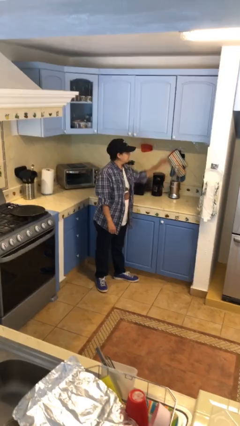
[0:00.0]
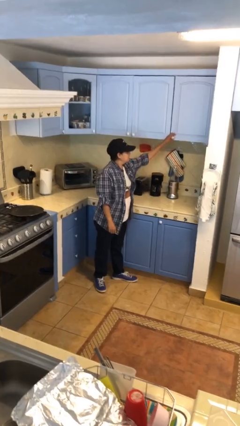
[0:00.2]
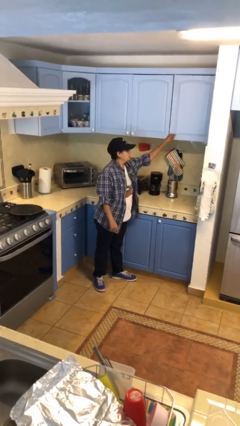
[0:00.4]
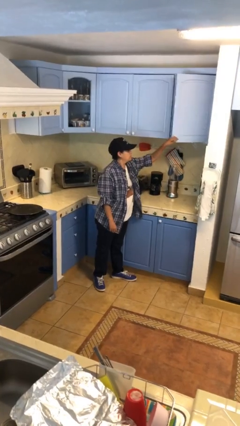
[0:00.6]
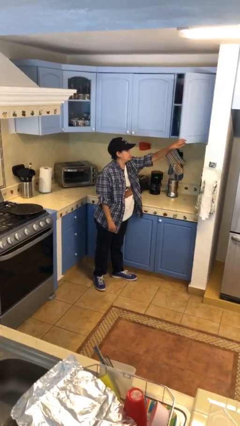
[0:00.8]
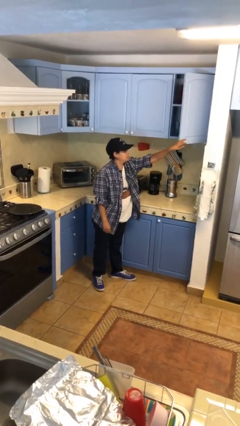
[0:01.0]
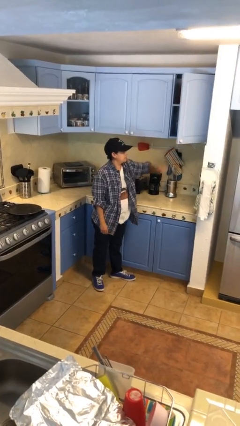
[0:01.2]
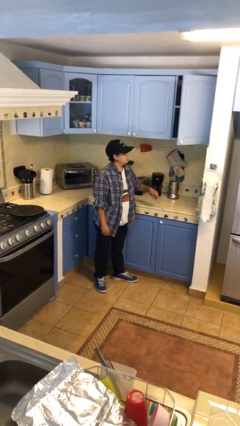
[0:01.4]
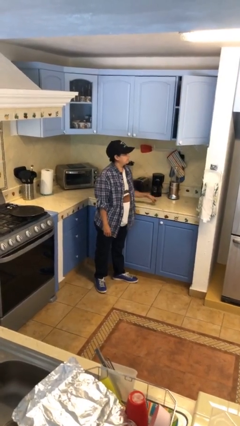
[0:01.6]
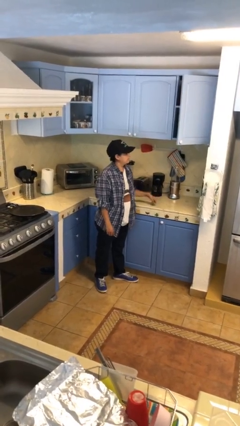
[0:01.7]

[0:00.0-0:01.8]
person opens cabinet

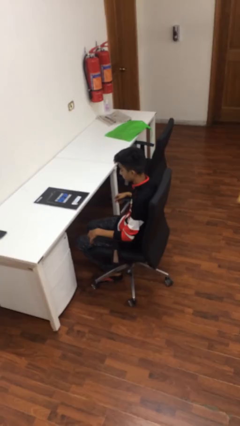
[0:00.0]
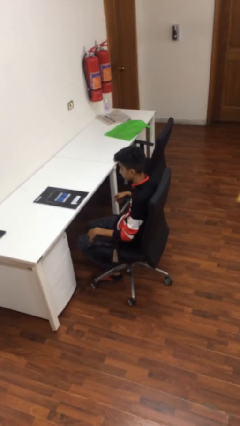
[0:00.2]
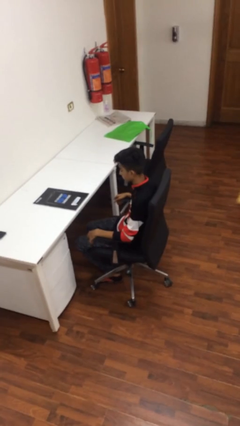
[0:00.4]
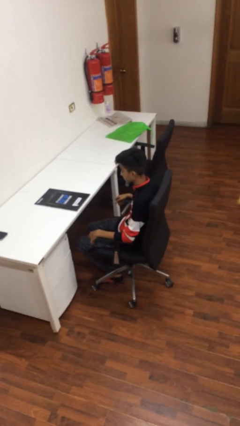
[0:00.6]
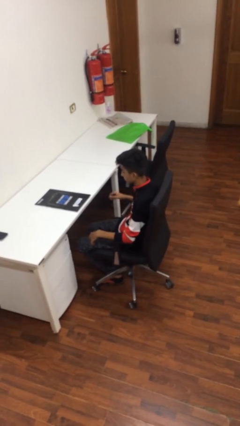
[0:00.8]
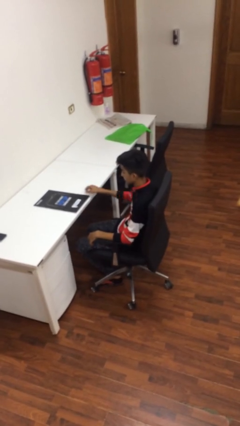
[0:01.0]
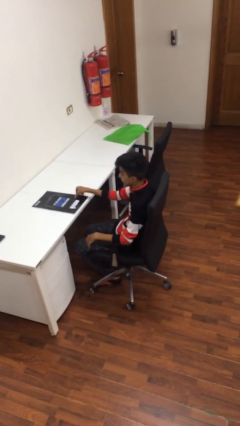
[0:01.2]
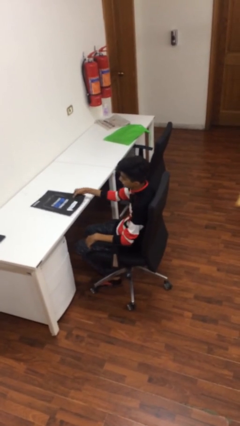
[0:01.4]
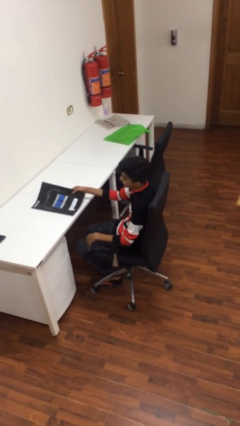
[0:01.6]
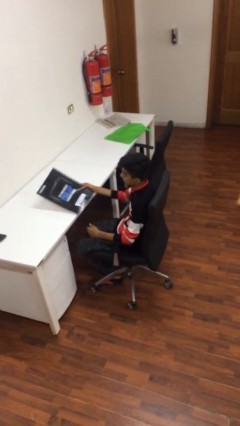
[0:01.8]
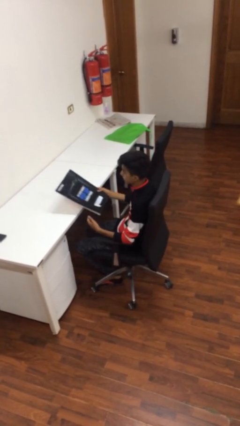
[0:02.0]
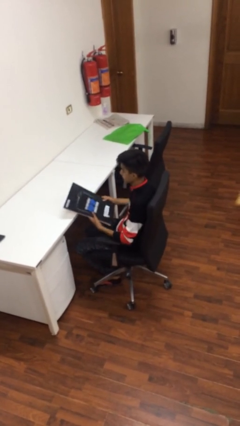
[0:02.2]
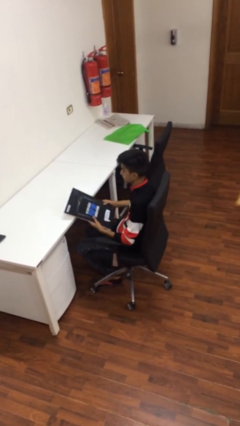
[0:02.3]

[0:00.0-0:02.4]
person picks up object from table

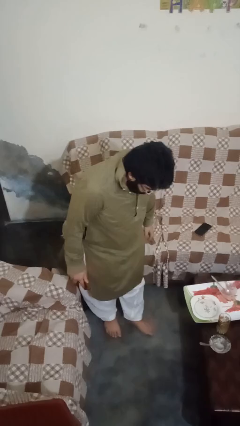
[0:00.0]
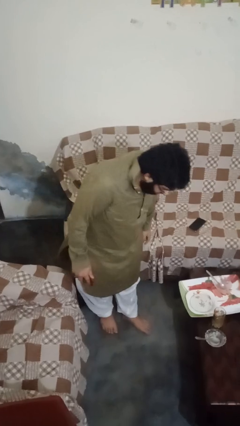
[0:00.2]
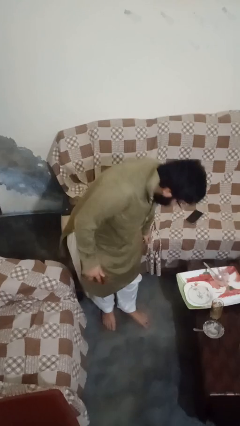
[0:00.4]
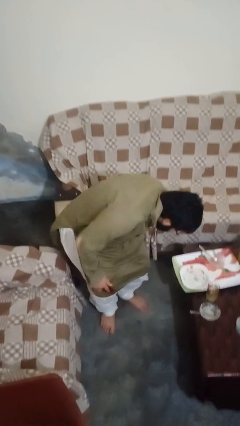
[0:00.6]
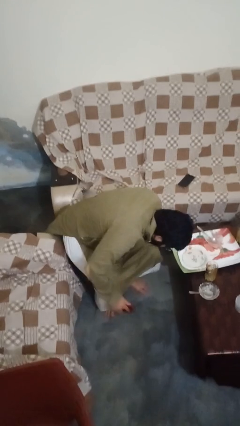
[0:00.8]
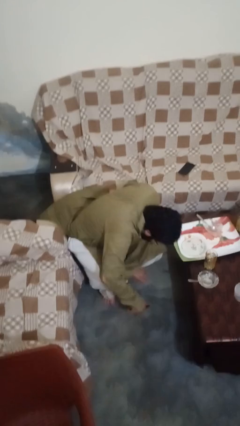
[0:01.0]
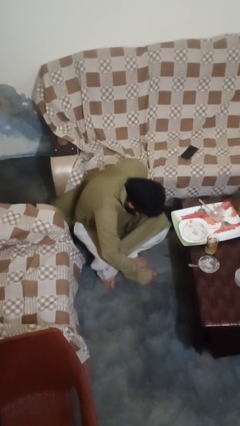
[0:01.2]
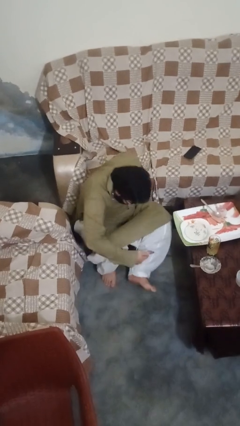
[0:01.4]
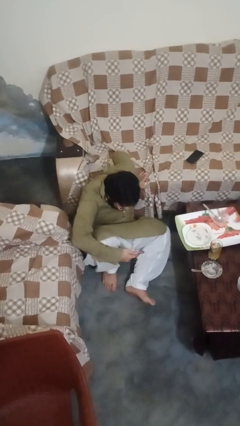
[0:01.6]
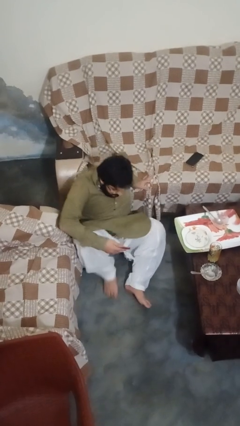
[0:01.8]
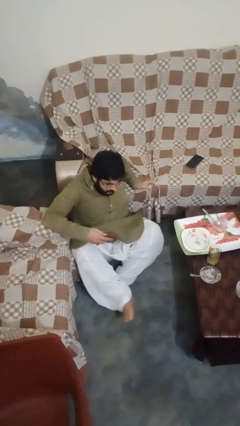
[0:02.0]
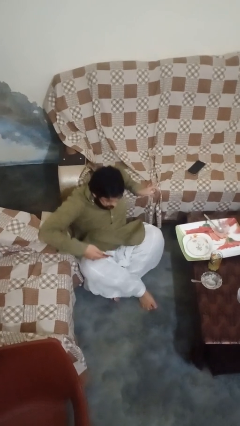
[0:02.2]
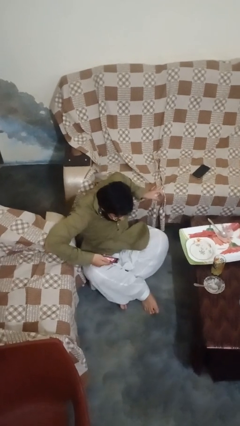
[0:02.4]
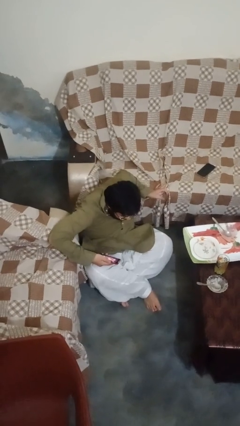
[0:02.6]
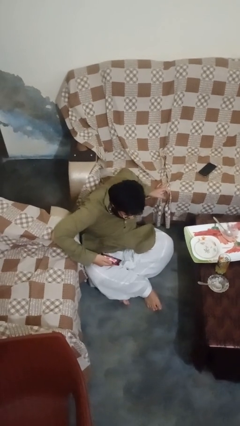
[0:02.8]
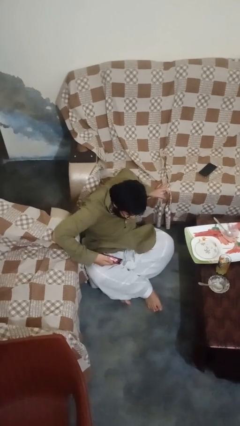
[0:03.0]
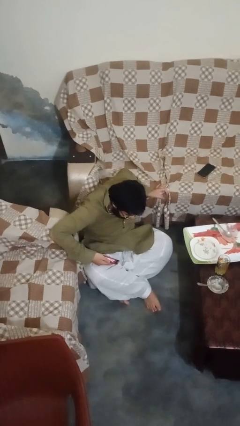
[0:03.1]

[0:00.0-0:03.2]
person sits crisscross

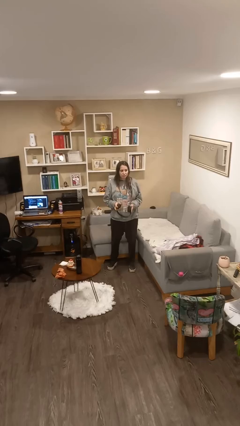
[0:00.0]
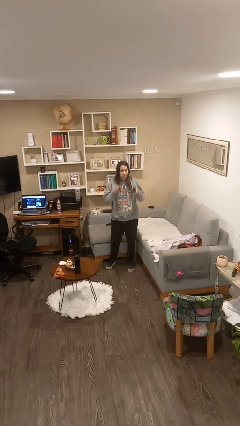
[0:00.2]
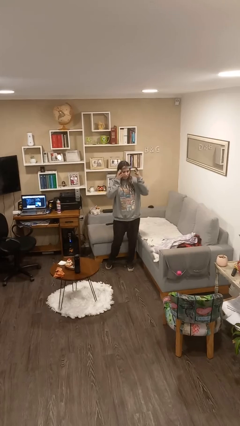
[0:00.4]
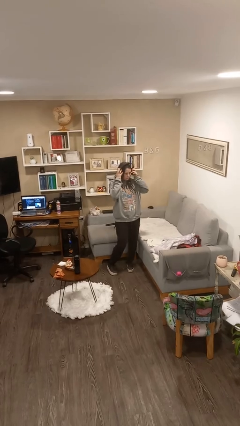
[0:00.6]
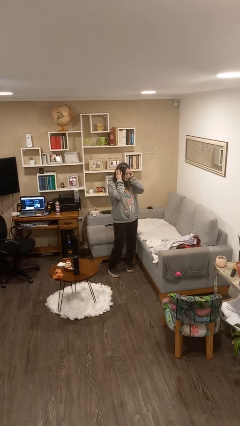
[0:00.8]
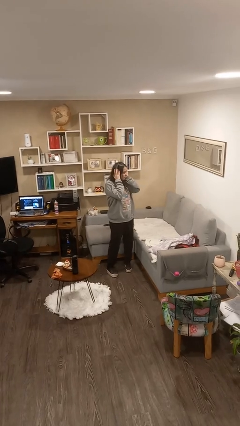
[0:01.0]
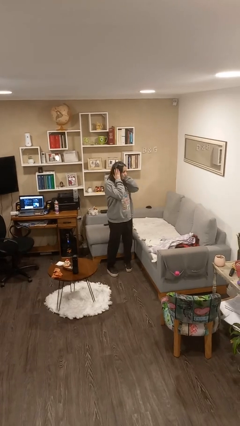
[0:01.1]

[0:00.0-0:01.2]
person puts on headphones

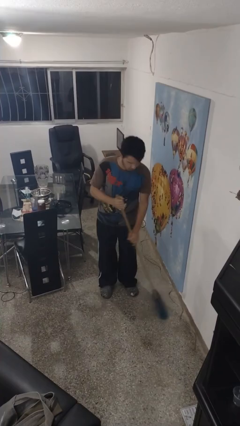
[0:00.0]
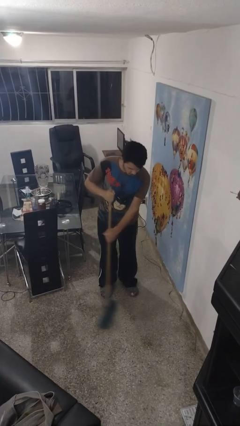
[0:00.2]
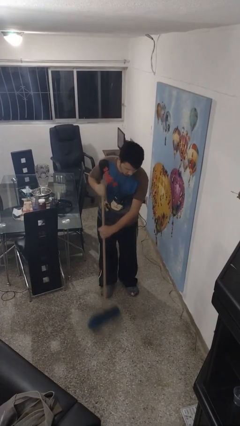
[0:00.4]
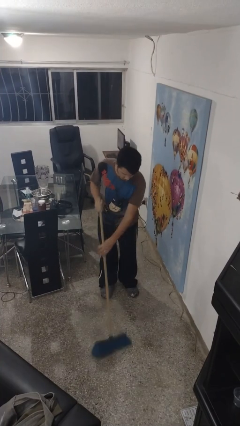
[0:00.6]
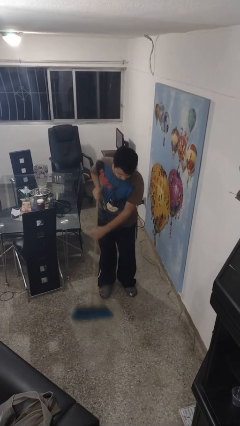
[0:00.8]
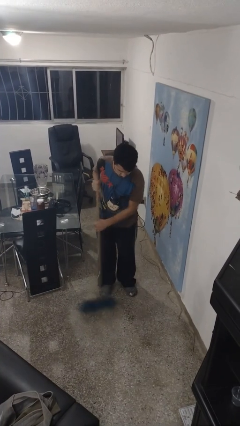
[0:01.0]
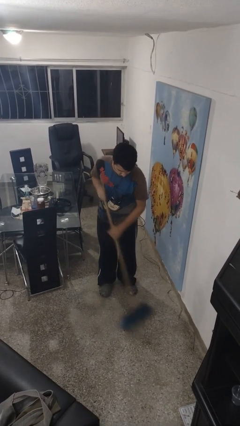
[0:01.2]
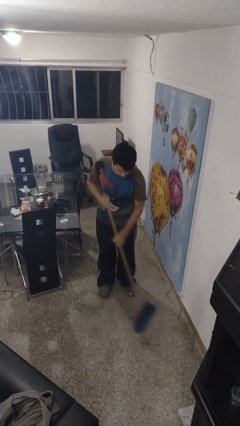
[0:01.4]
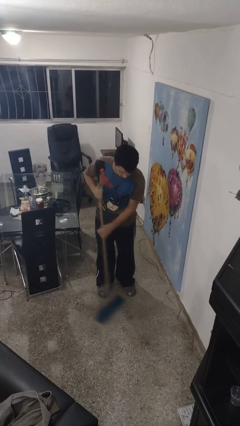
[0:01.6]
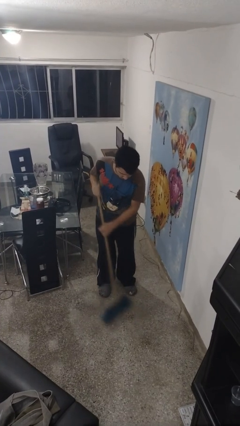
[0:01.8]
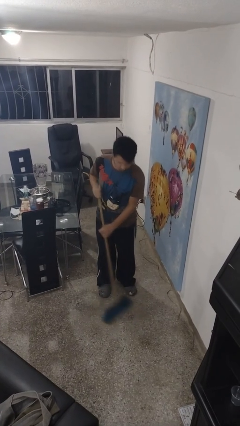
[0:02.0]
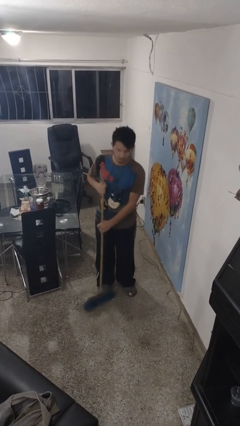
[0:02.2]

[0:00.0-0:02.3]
person sweeps floor

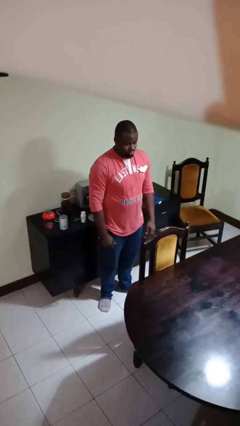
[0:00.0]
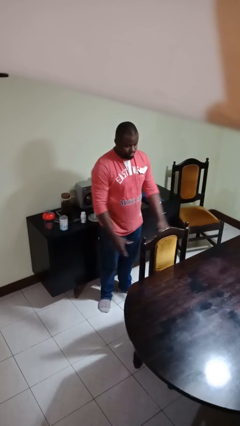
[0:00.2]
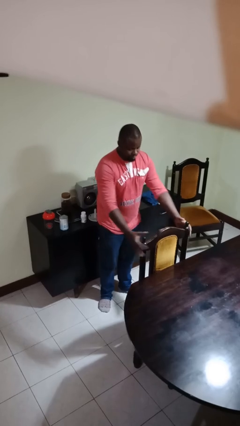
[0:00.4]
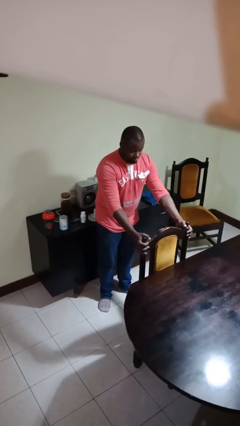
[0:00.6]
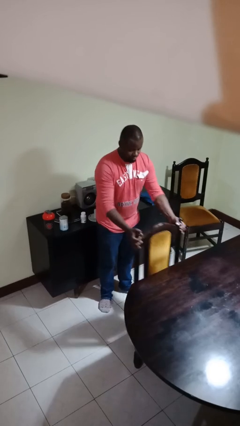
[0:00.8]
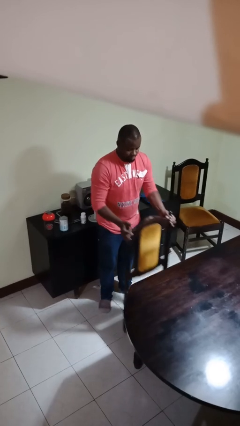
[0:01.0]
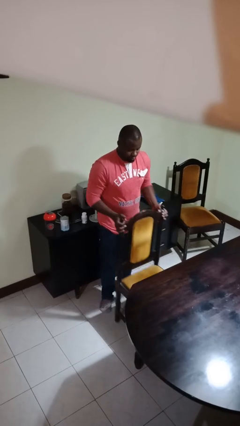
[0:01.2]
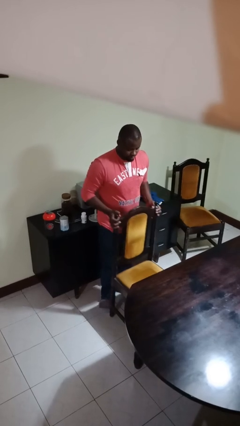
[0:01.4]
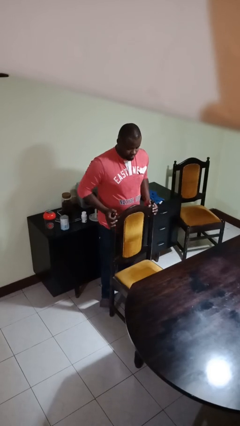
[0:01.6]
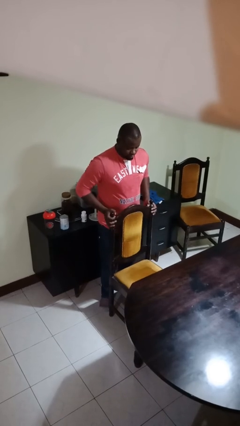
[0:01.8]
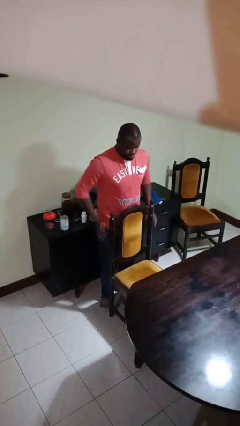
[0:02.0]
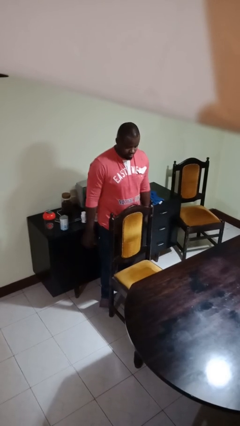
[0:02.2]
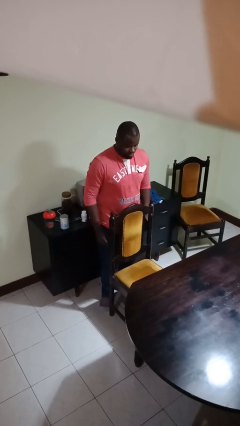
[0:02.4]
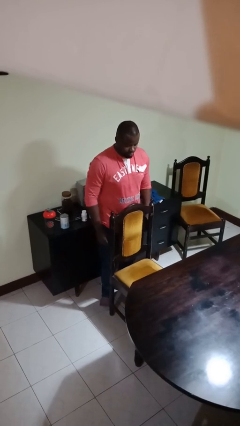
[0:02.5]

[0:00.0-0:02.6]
person pulls out chair

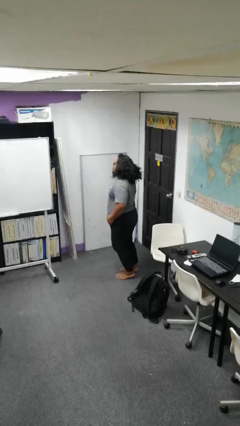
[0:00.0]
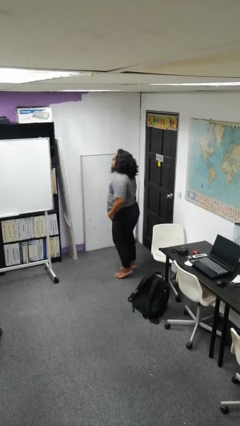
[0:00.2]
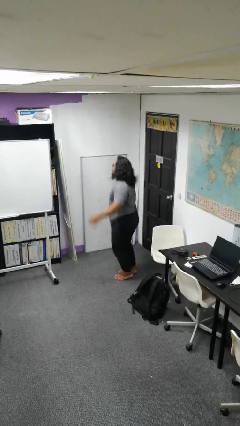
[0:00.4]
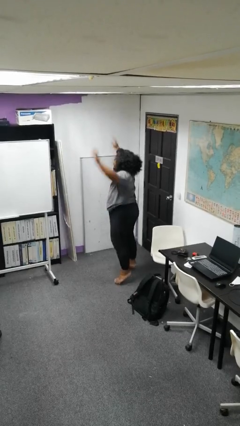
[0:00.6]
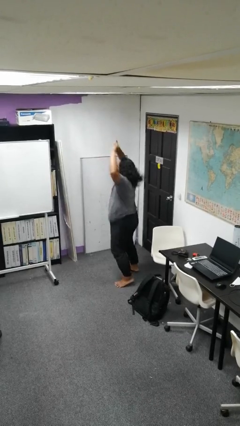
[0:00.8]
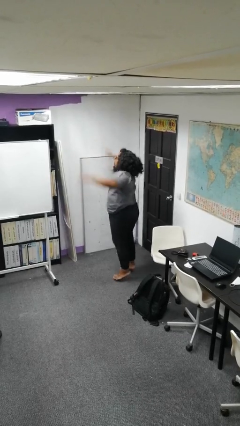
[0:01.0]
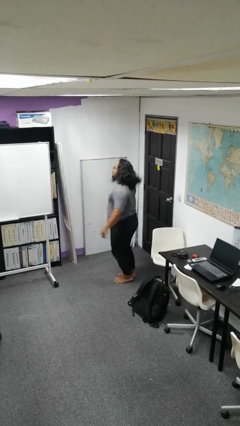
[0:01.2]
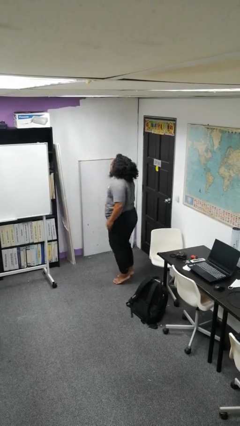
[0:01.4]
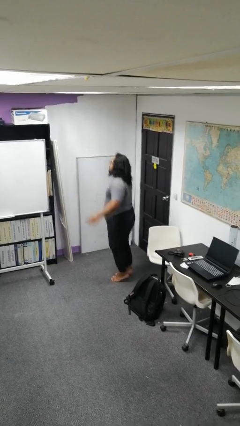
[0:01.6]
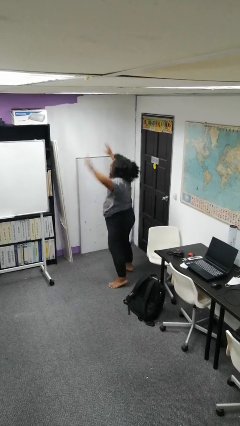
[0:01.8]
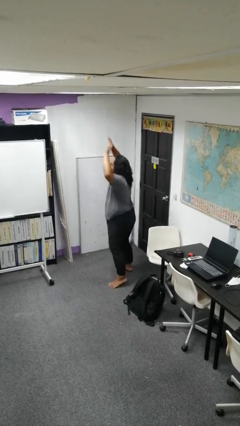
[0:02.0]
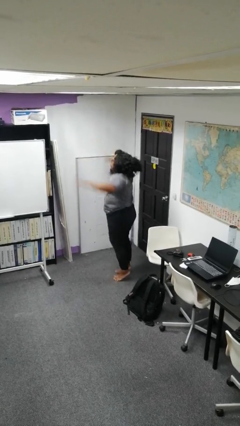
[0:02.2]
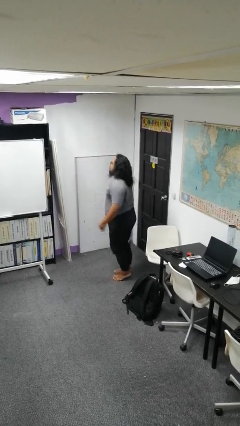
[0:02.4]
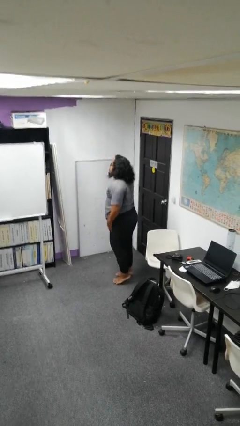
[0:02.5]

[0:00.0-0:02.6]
person exercises with jumping jacks

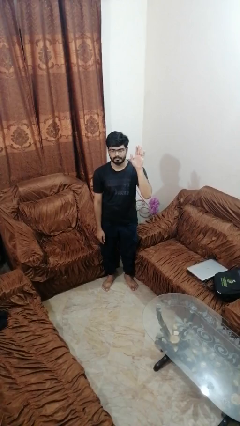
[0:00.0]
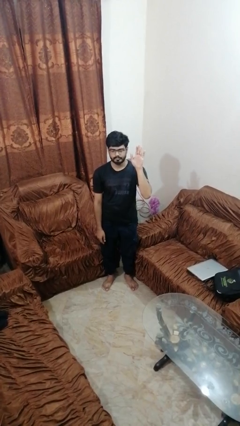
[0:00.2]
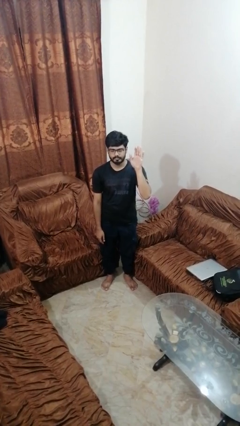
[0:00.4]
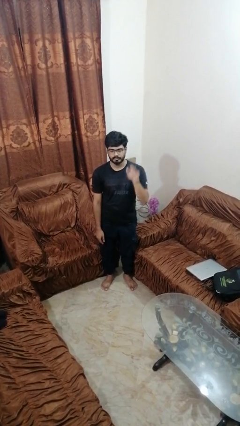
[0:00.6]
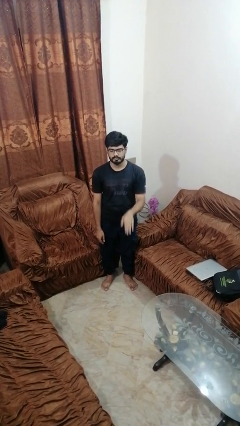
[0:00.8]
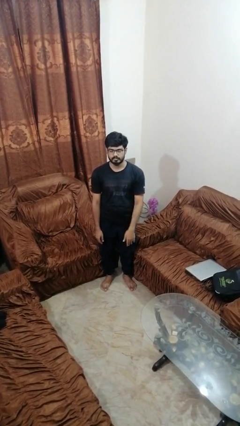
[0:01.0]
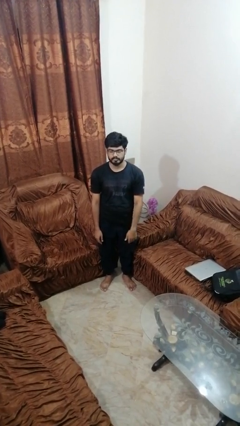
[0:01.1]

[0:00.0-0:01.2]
person gestures lower hand
